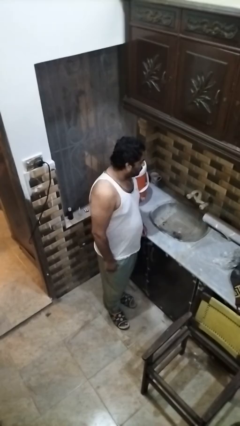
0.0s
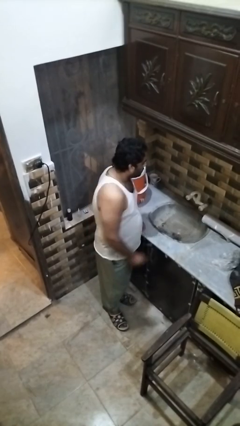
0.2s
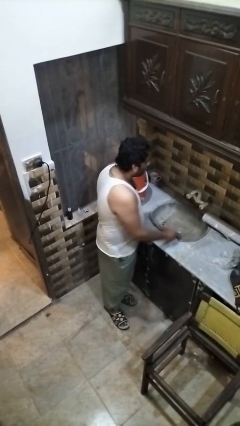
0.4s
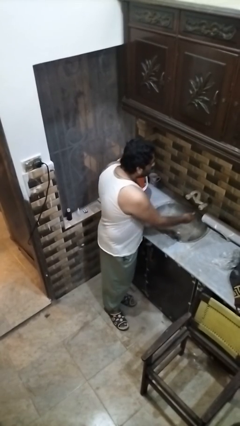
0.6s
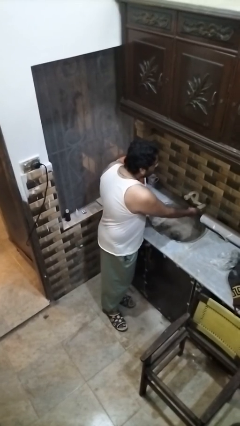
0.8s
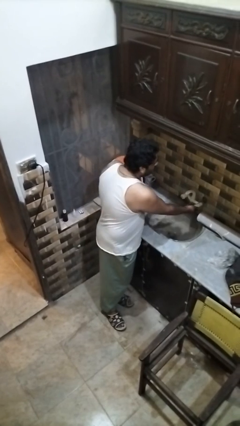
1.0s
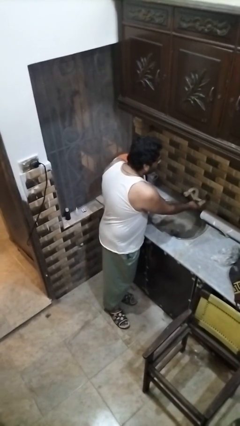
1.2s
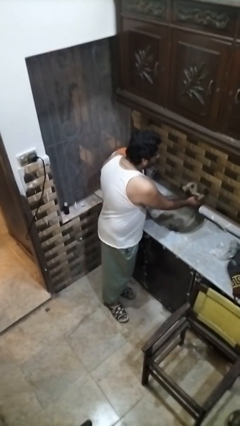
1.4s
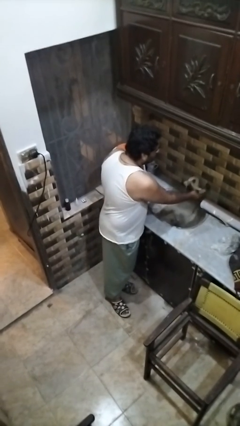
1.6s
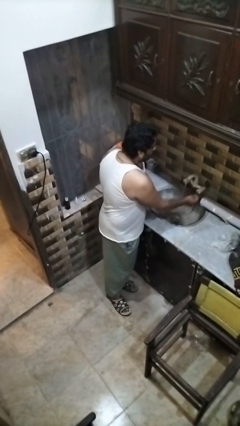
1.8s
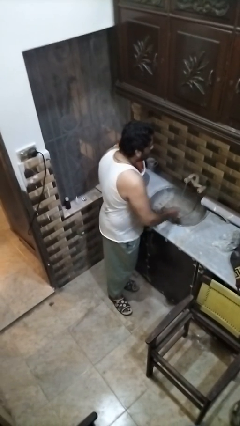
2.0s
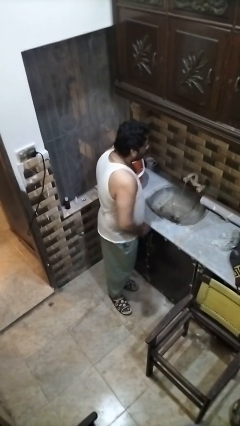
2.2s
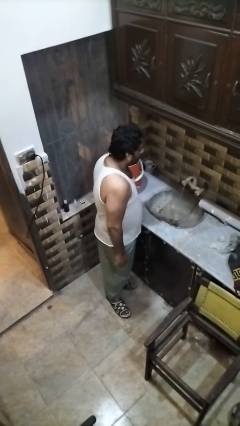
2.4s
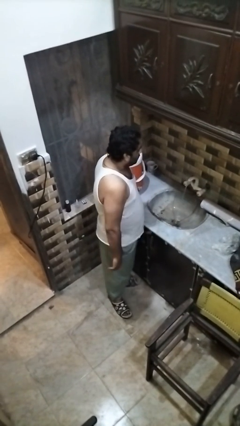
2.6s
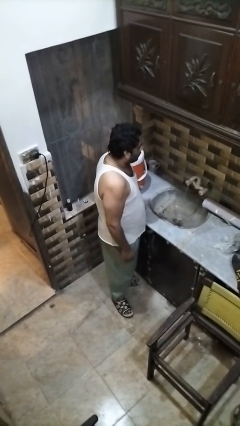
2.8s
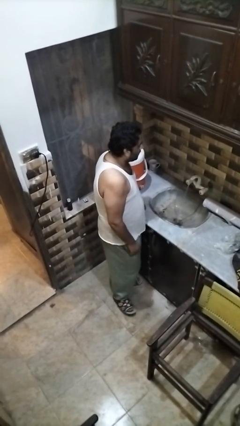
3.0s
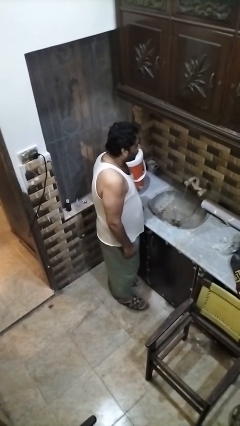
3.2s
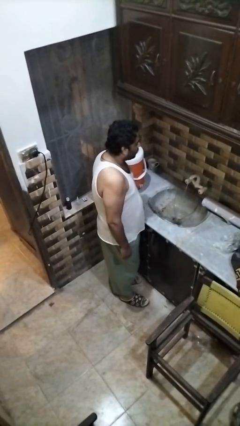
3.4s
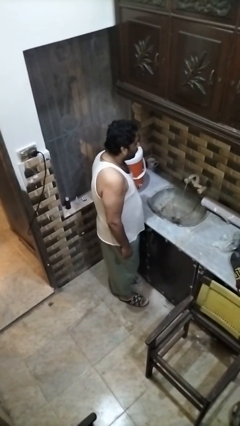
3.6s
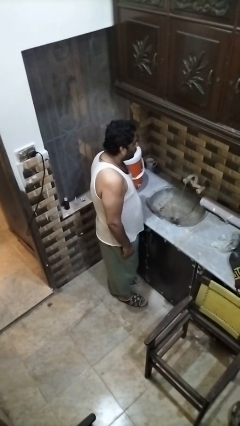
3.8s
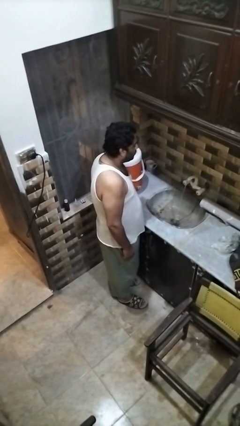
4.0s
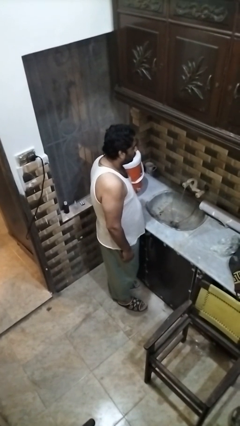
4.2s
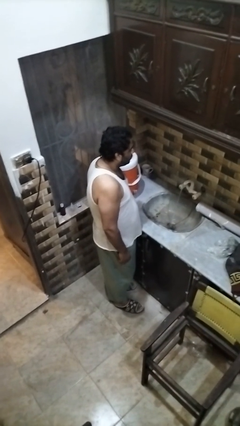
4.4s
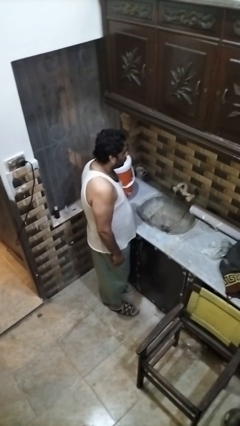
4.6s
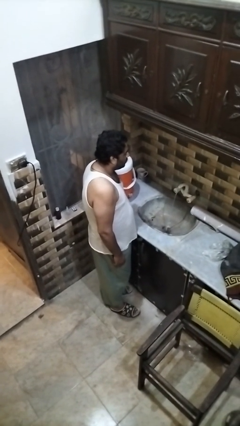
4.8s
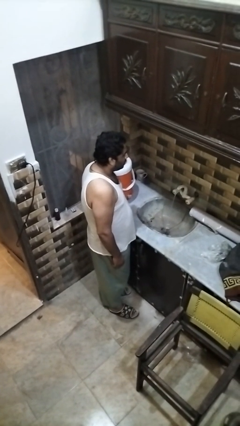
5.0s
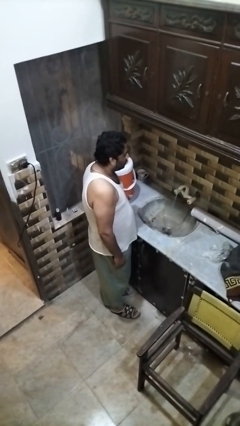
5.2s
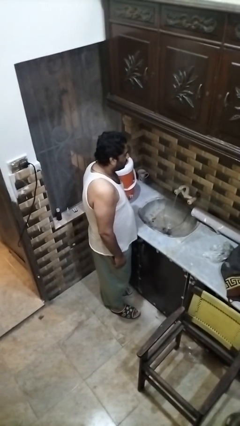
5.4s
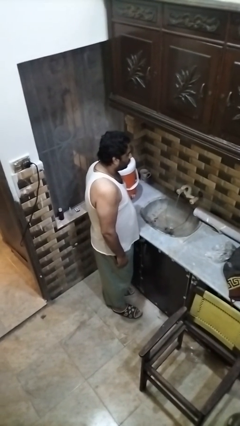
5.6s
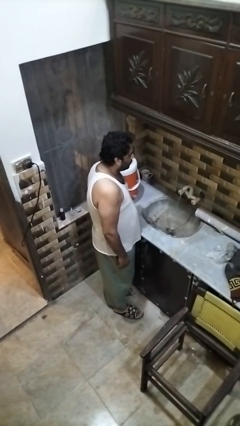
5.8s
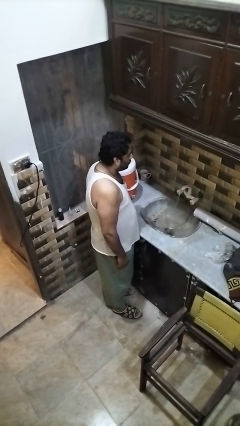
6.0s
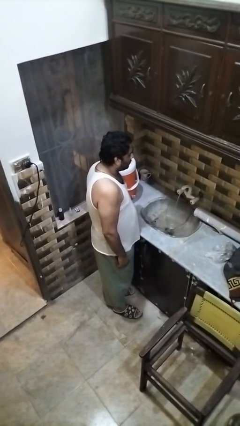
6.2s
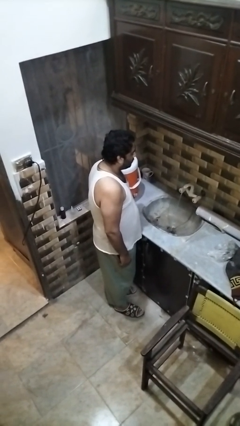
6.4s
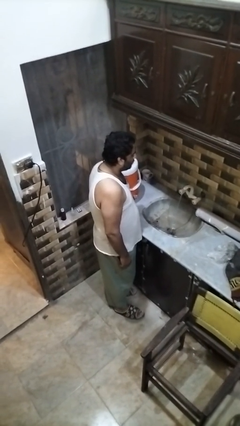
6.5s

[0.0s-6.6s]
person turns on faucet

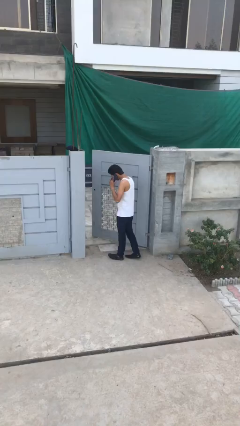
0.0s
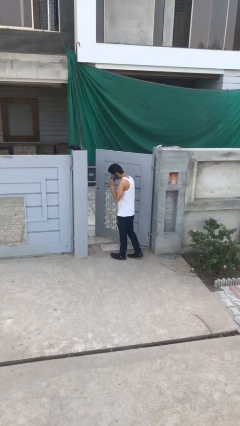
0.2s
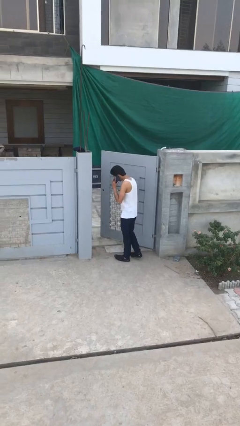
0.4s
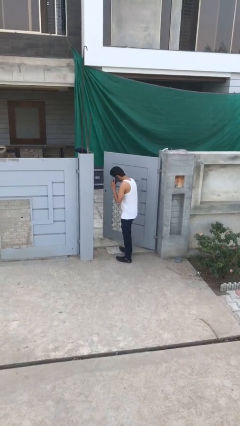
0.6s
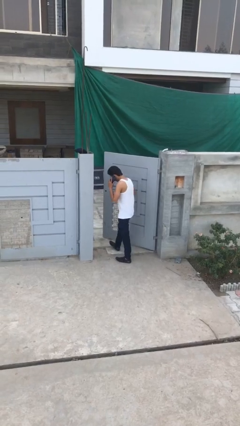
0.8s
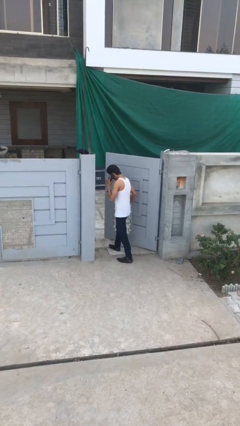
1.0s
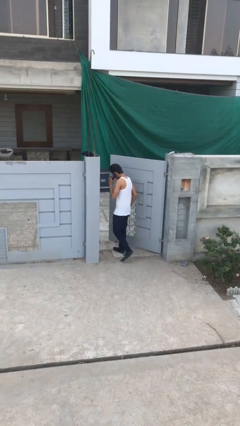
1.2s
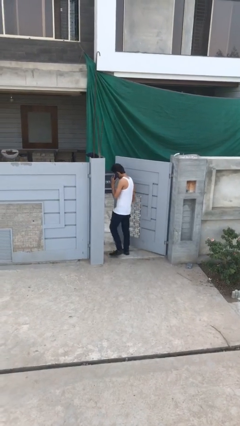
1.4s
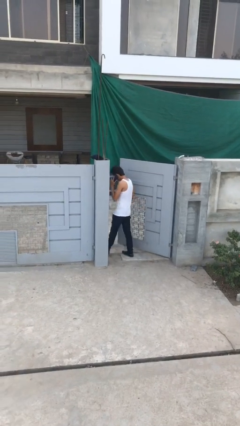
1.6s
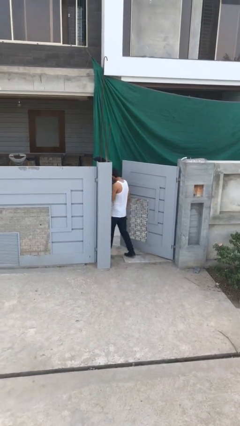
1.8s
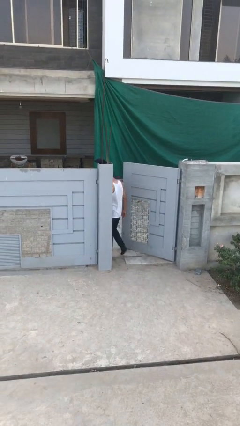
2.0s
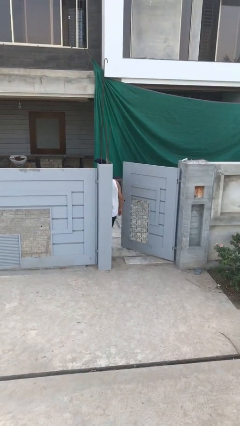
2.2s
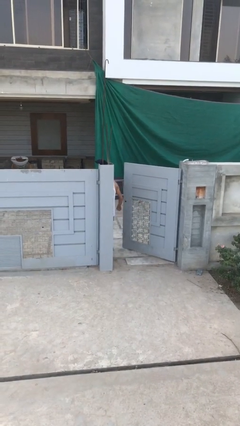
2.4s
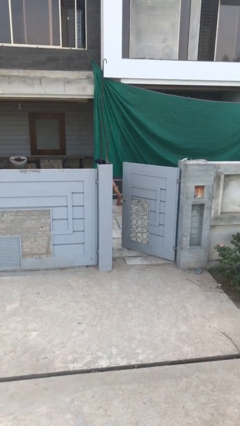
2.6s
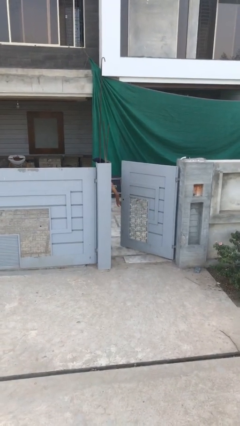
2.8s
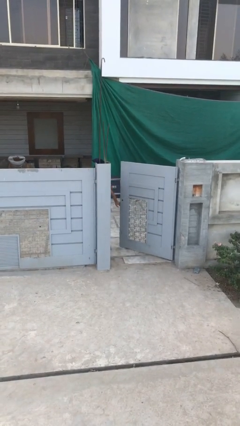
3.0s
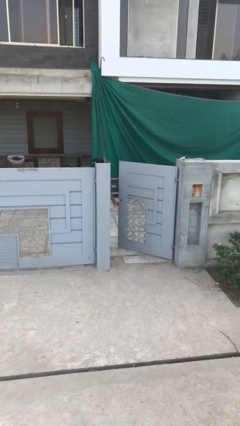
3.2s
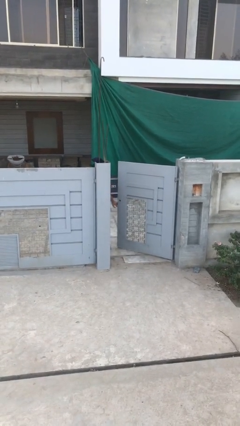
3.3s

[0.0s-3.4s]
person exits scene through structure

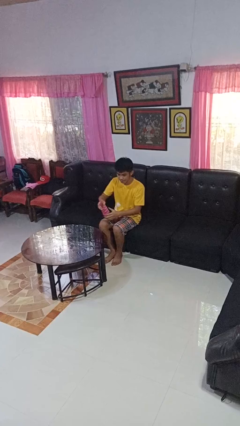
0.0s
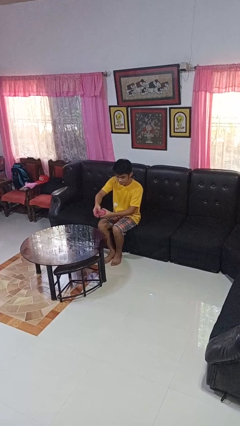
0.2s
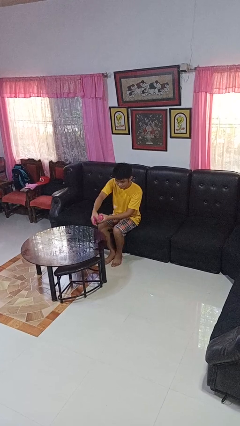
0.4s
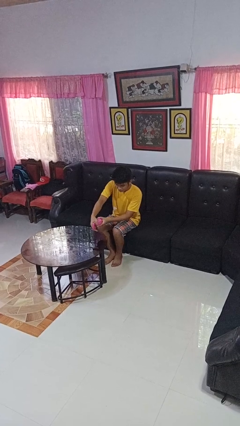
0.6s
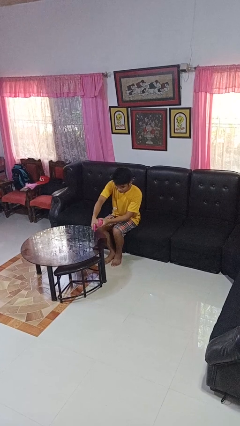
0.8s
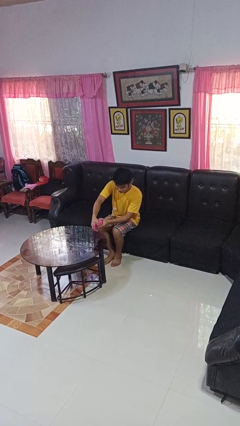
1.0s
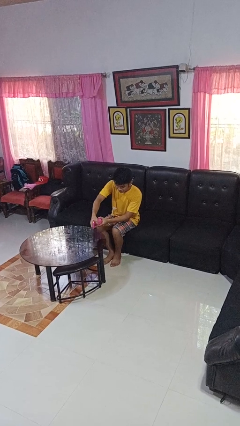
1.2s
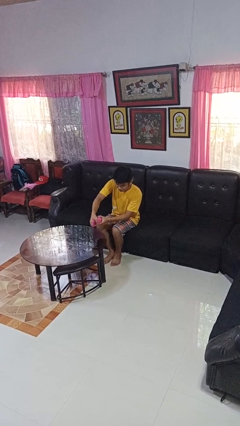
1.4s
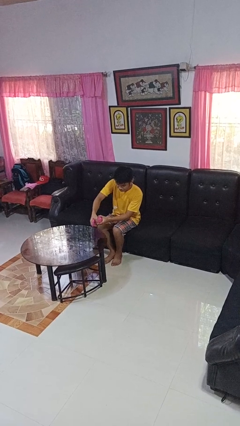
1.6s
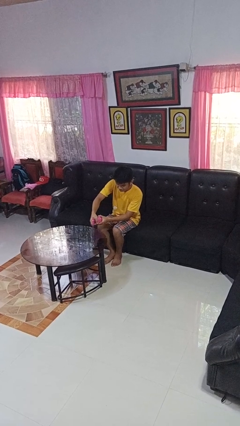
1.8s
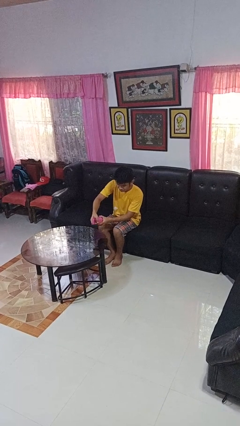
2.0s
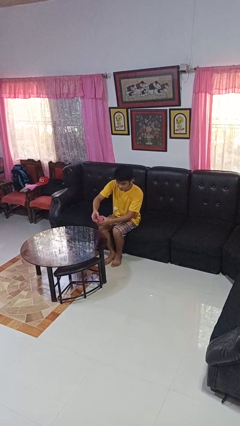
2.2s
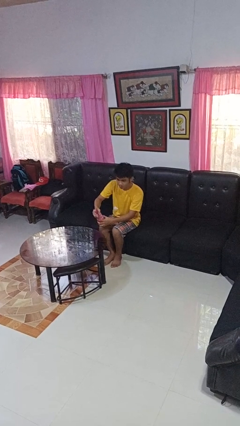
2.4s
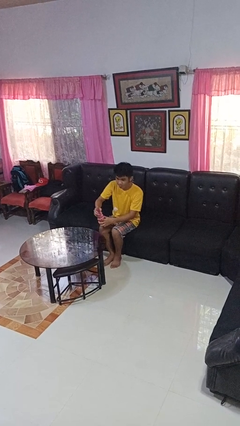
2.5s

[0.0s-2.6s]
person sprays from bottle

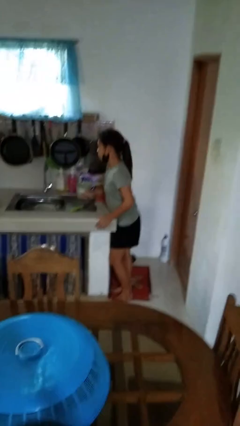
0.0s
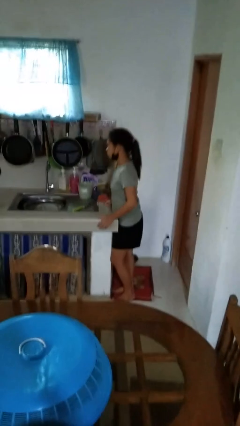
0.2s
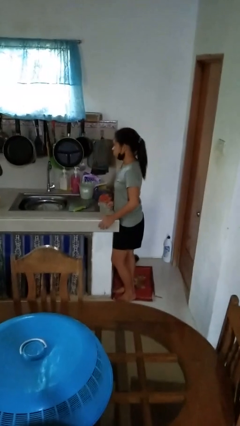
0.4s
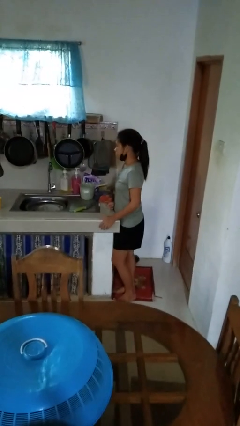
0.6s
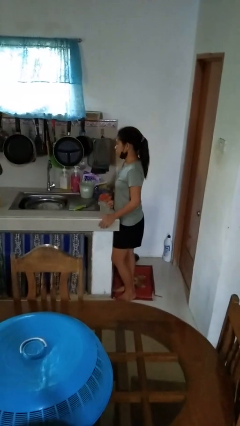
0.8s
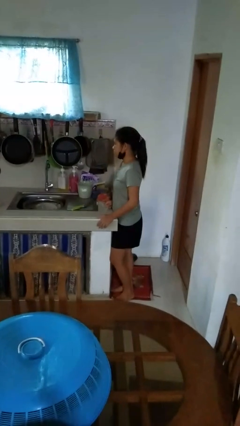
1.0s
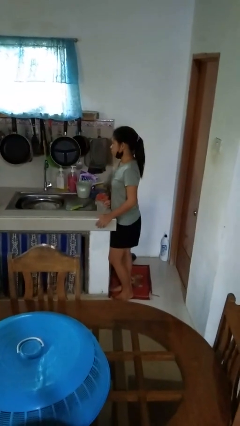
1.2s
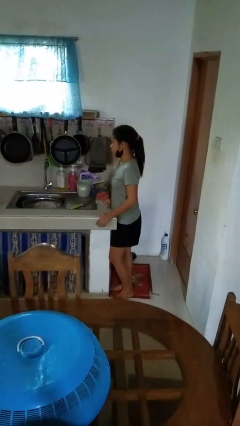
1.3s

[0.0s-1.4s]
person turns off faucet

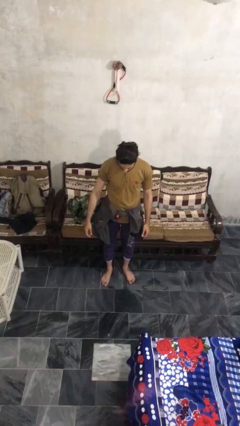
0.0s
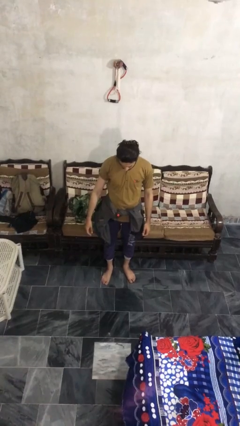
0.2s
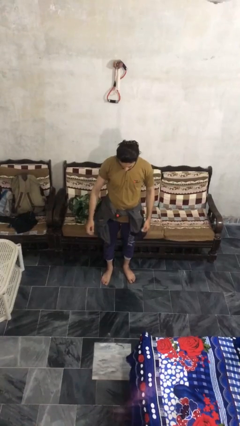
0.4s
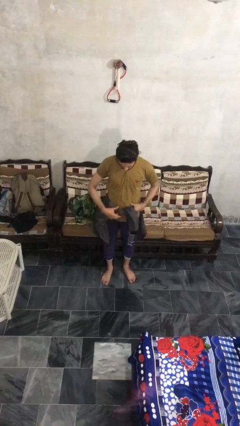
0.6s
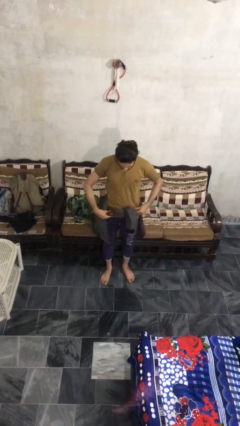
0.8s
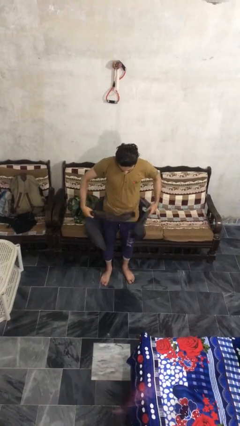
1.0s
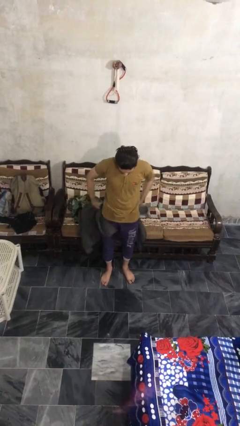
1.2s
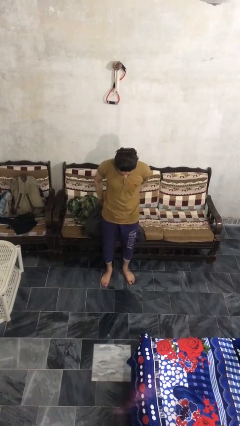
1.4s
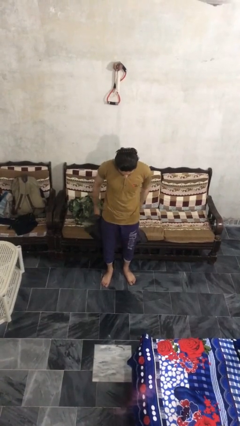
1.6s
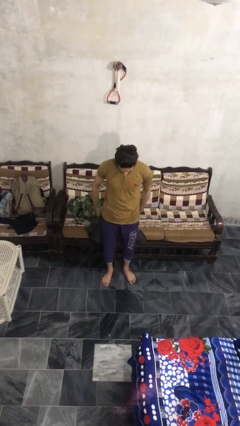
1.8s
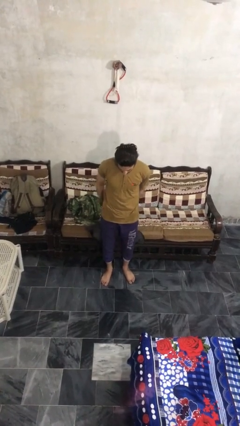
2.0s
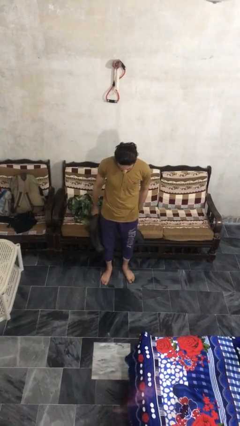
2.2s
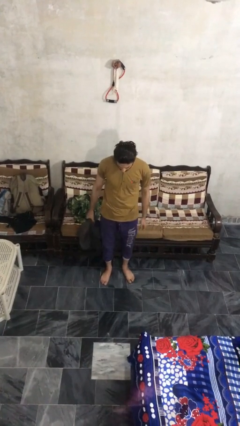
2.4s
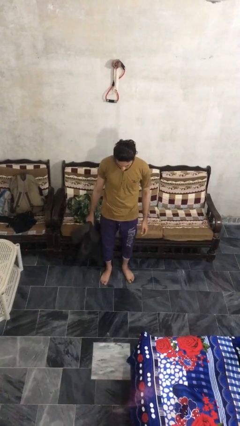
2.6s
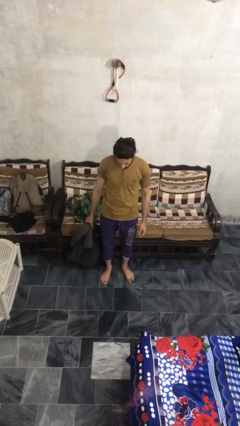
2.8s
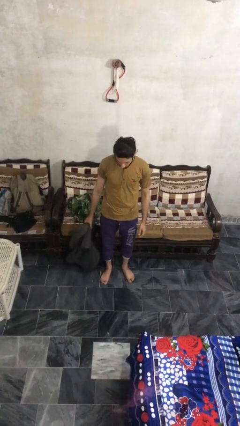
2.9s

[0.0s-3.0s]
person unties jacket around waist

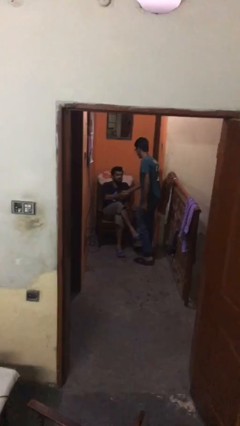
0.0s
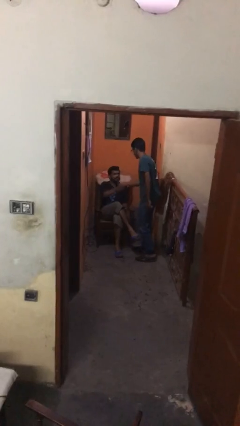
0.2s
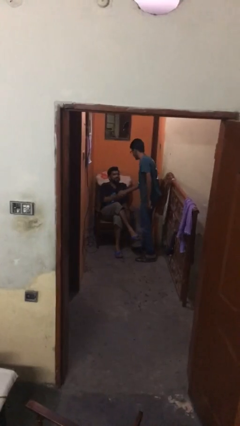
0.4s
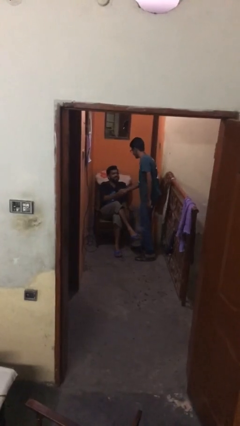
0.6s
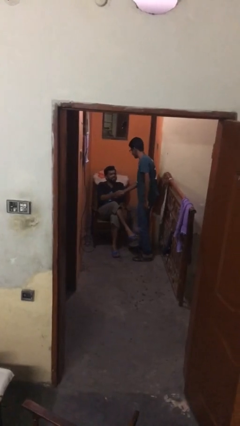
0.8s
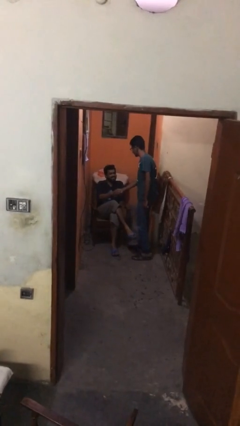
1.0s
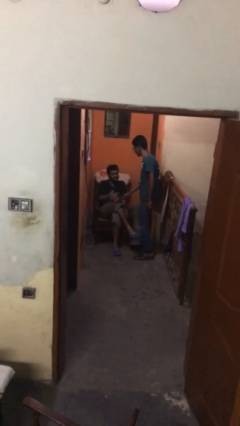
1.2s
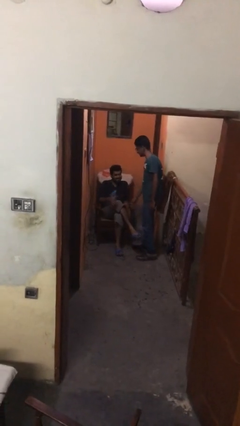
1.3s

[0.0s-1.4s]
person shakes hand
